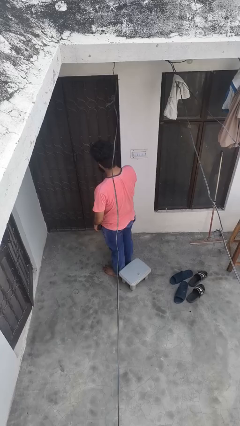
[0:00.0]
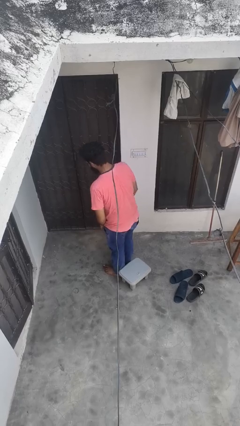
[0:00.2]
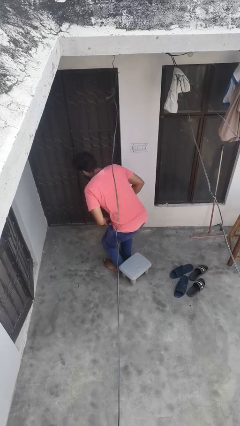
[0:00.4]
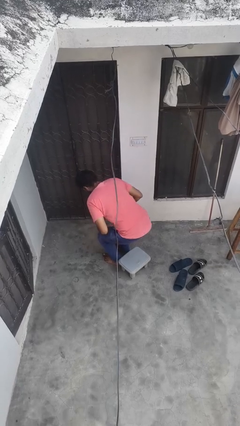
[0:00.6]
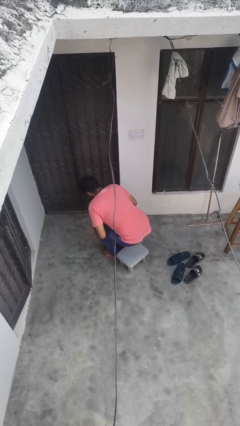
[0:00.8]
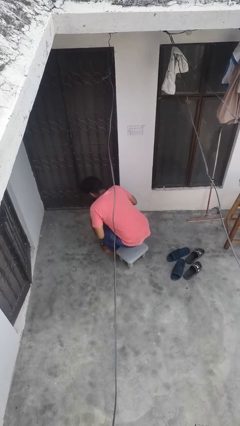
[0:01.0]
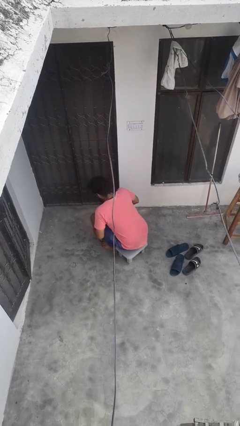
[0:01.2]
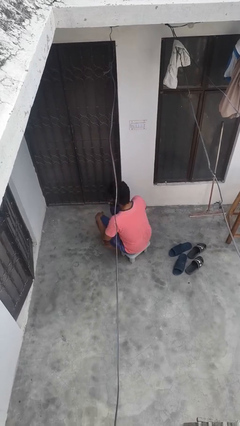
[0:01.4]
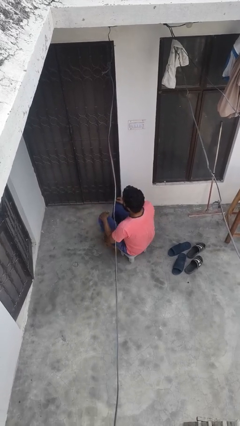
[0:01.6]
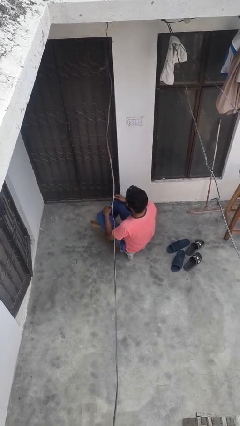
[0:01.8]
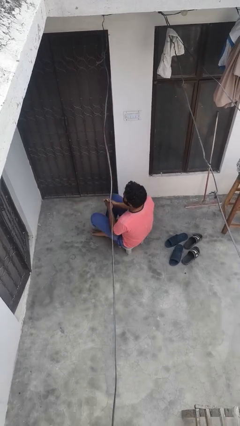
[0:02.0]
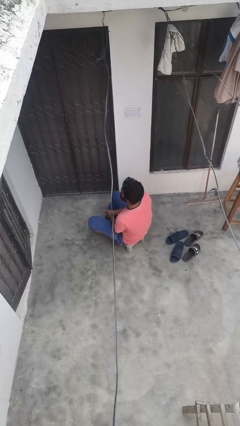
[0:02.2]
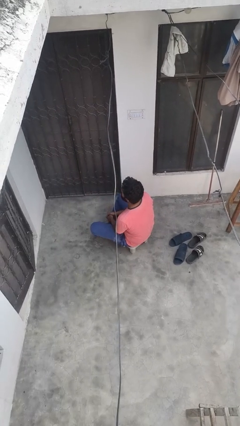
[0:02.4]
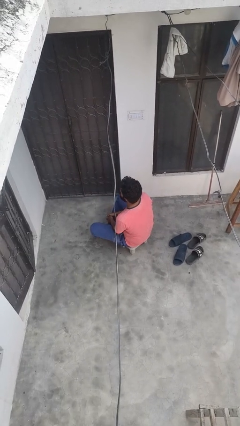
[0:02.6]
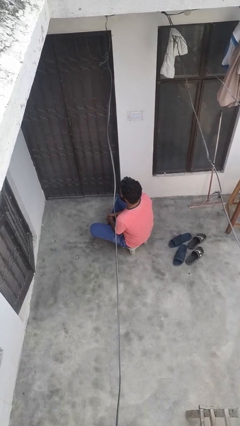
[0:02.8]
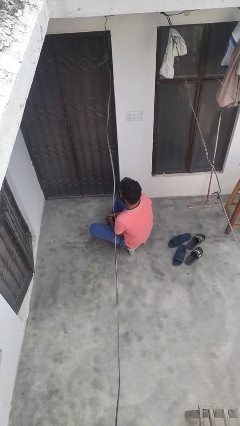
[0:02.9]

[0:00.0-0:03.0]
person sits crisscross

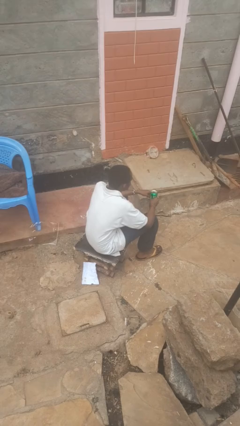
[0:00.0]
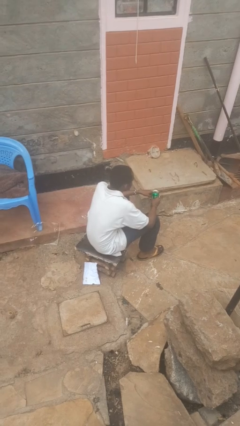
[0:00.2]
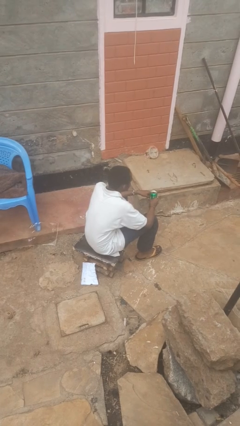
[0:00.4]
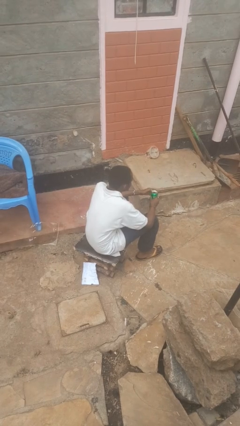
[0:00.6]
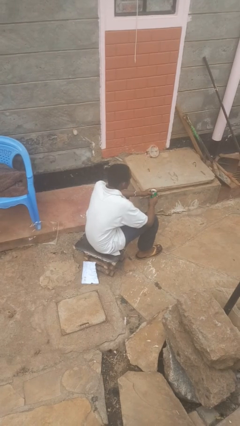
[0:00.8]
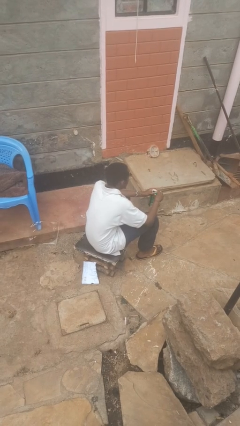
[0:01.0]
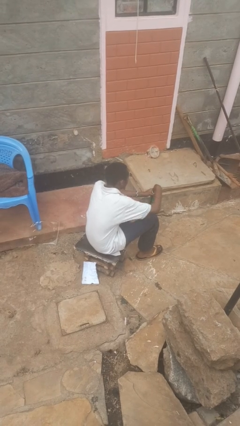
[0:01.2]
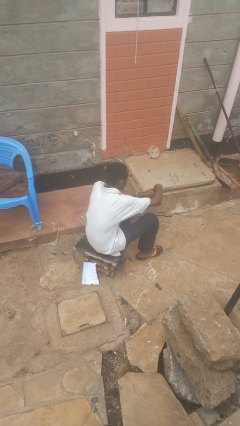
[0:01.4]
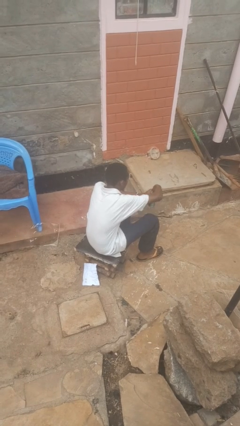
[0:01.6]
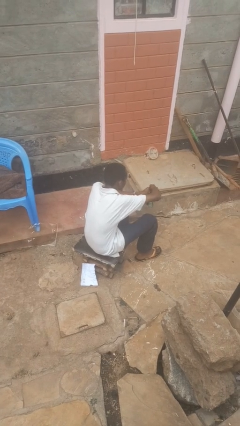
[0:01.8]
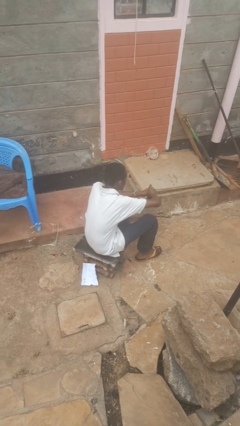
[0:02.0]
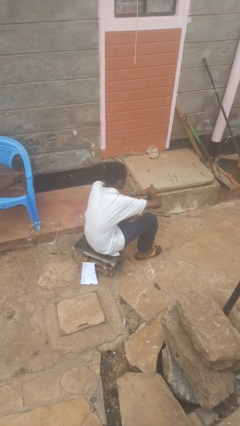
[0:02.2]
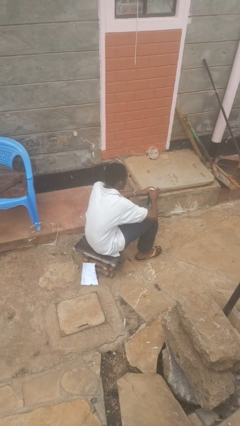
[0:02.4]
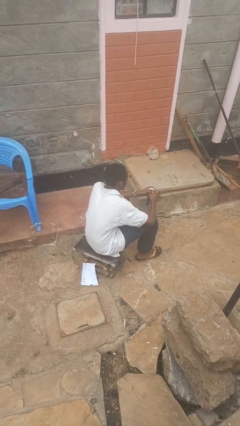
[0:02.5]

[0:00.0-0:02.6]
person opens beverage can

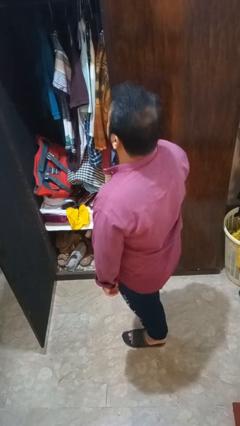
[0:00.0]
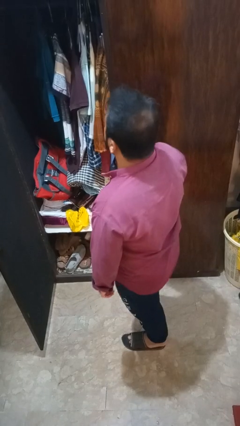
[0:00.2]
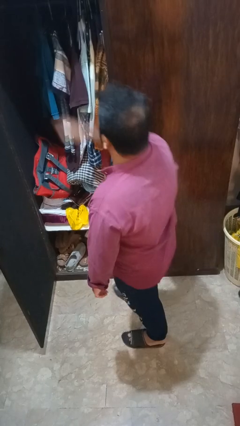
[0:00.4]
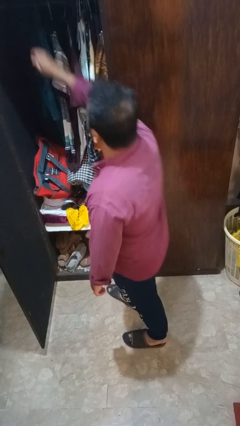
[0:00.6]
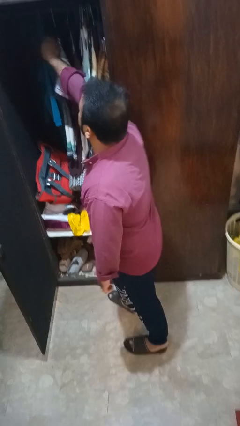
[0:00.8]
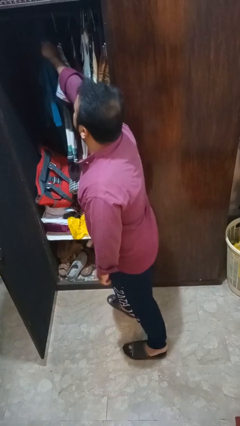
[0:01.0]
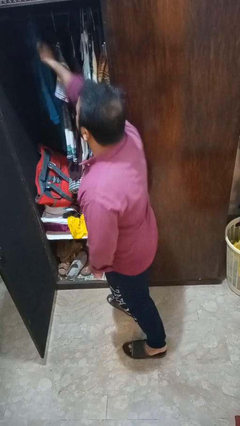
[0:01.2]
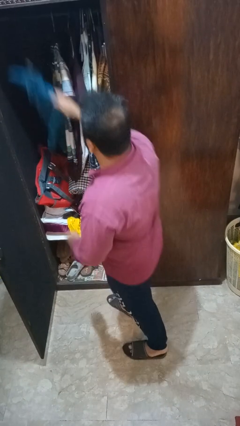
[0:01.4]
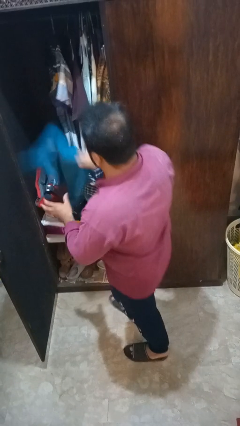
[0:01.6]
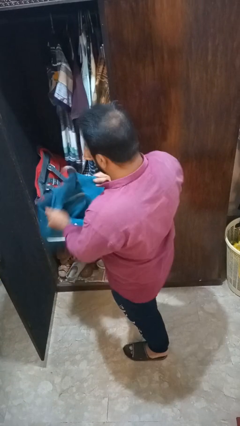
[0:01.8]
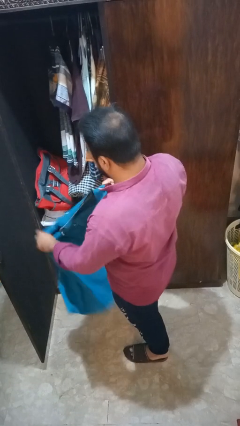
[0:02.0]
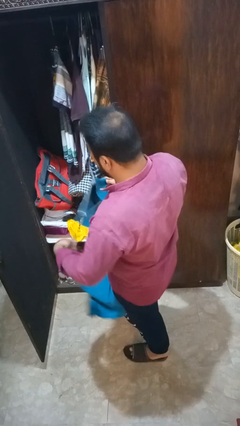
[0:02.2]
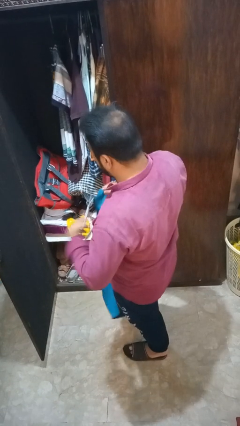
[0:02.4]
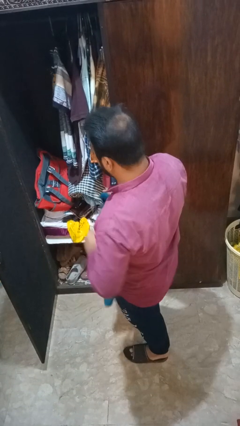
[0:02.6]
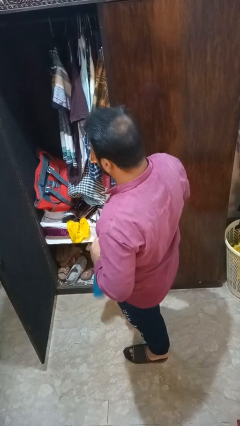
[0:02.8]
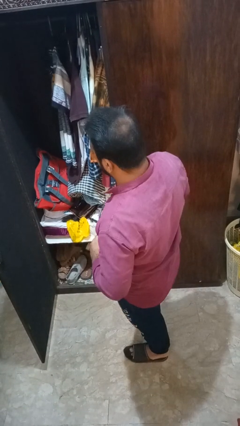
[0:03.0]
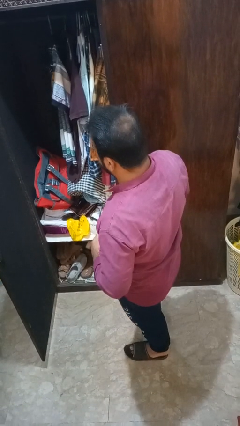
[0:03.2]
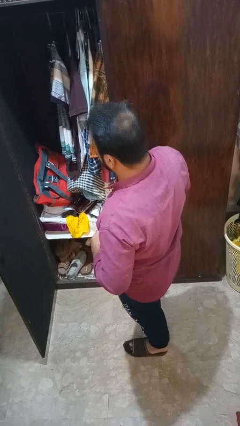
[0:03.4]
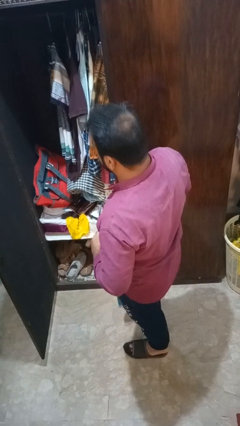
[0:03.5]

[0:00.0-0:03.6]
person takes clothes from closet

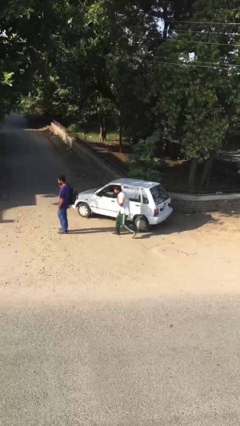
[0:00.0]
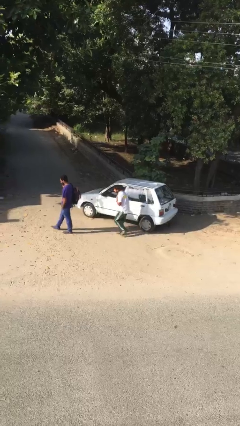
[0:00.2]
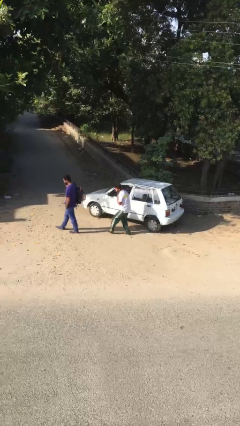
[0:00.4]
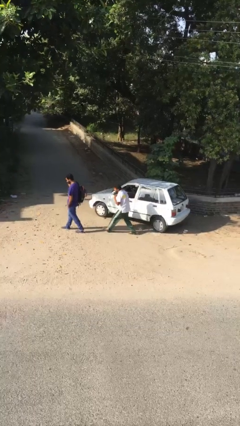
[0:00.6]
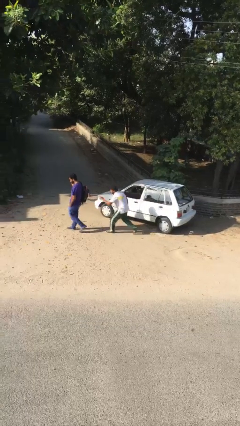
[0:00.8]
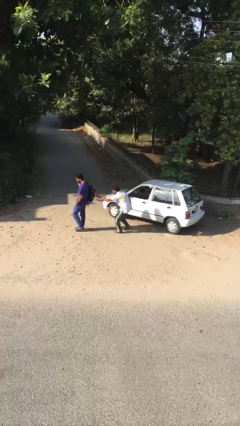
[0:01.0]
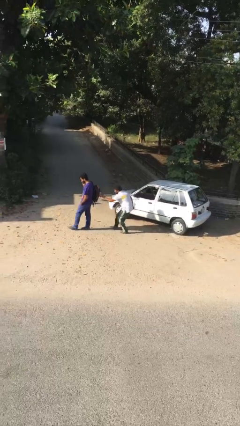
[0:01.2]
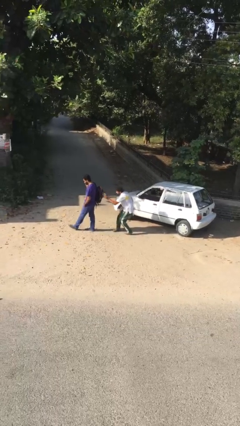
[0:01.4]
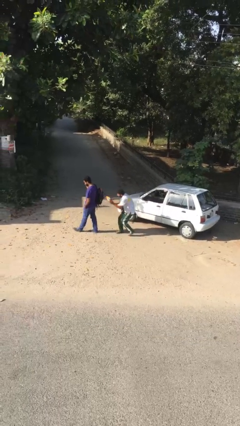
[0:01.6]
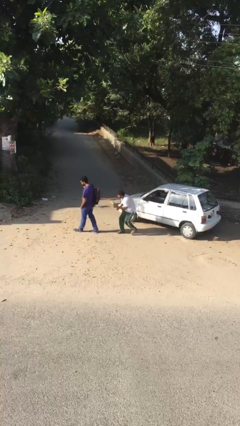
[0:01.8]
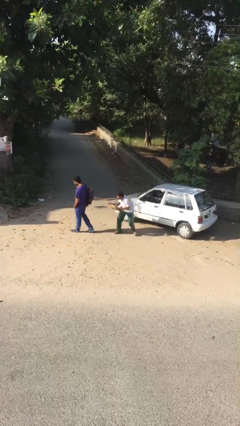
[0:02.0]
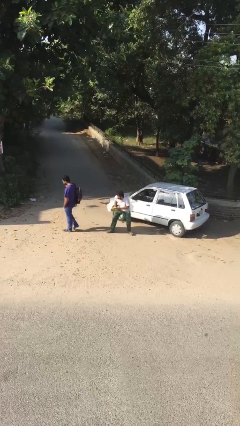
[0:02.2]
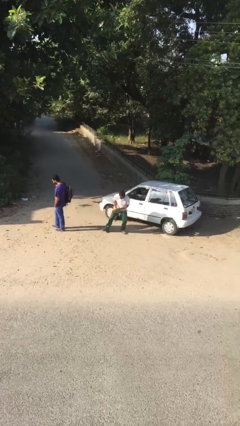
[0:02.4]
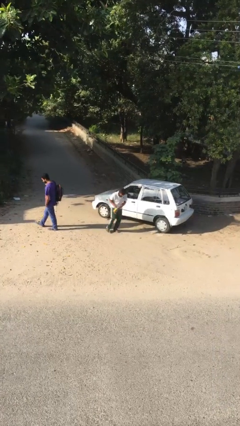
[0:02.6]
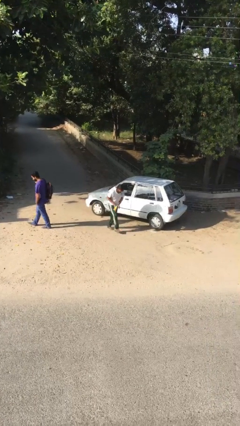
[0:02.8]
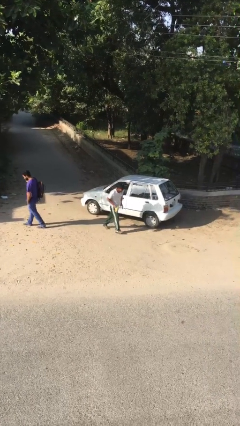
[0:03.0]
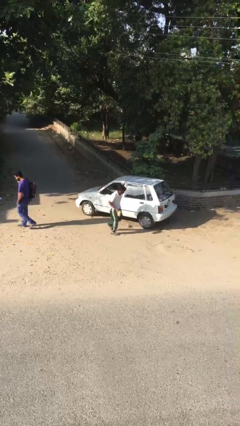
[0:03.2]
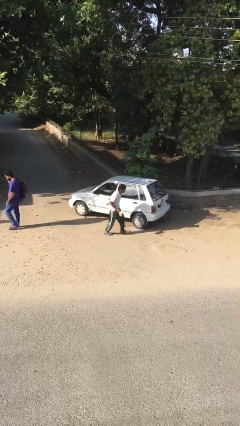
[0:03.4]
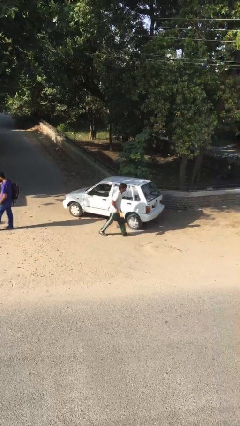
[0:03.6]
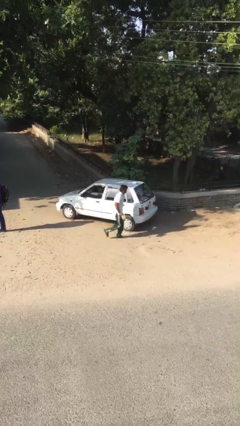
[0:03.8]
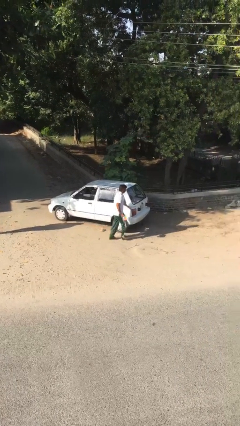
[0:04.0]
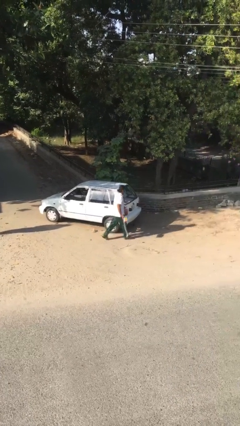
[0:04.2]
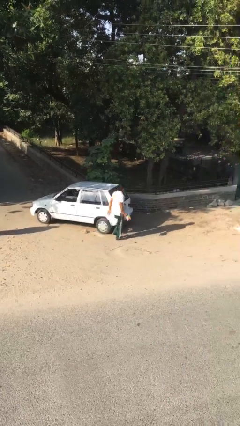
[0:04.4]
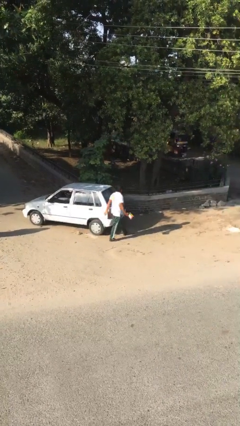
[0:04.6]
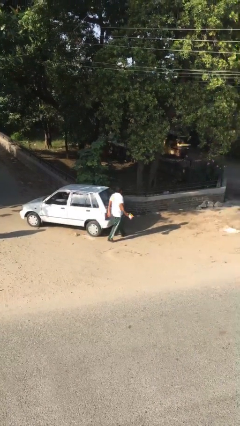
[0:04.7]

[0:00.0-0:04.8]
person steals object from person

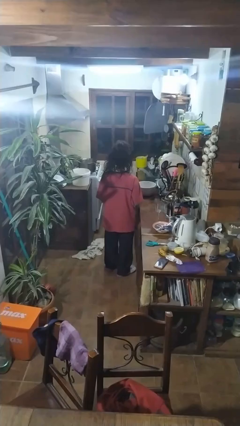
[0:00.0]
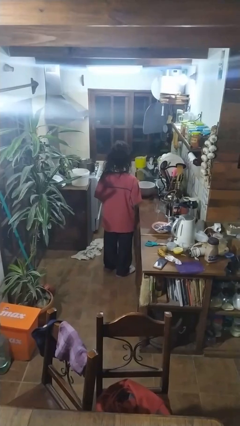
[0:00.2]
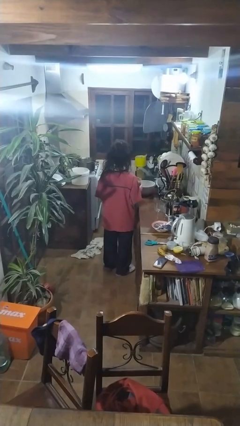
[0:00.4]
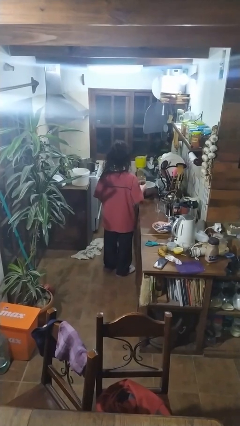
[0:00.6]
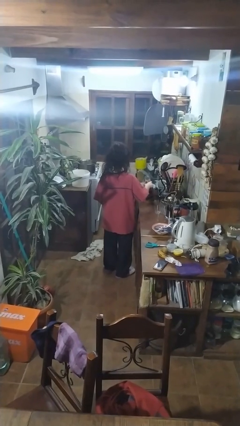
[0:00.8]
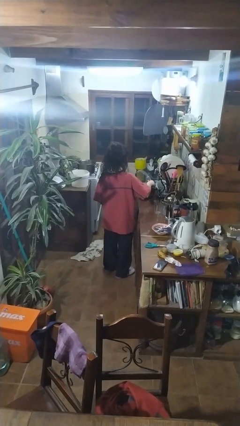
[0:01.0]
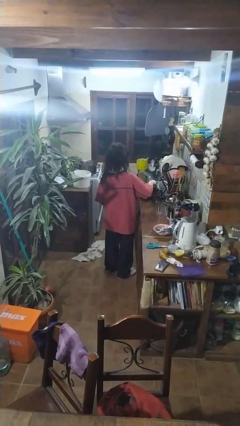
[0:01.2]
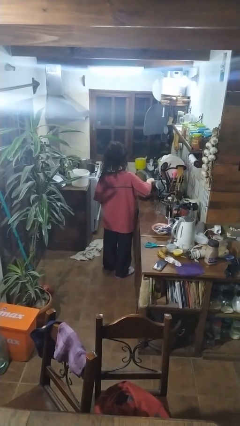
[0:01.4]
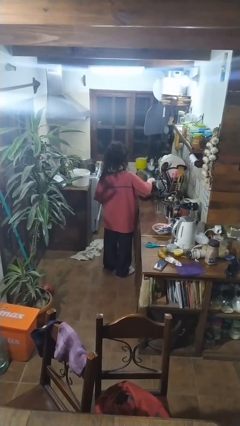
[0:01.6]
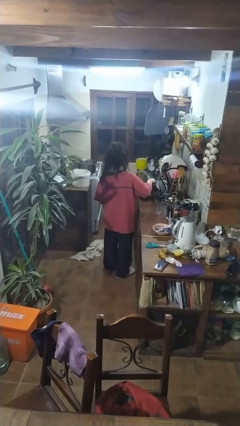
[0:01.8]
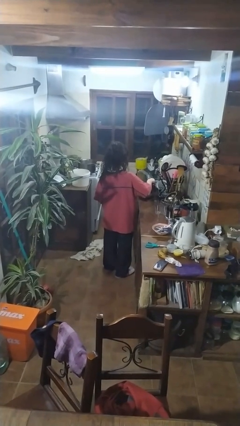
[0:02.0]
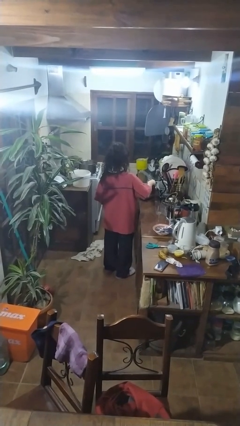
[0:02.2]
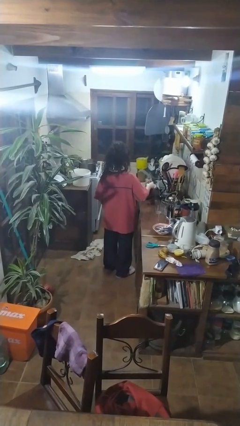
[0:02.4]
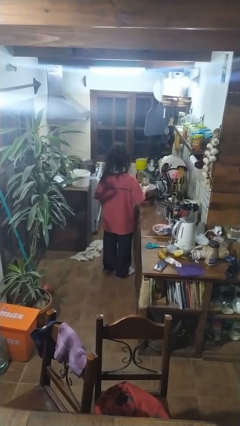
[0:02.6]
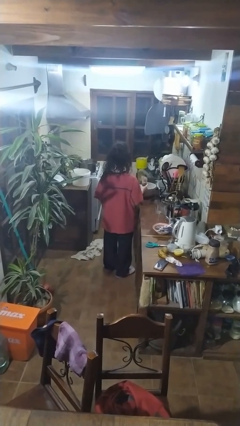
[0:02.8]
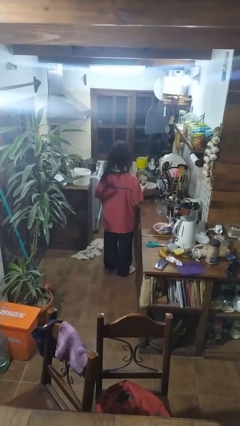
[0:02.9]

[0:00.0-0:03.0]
person pours into bowl

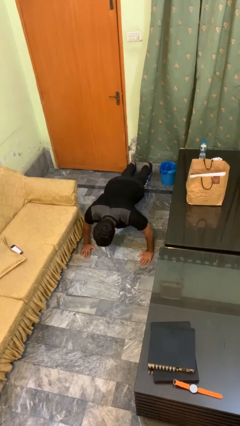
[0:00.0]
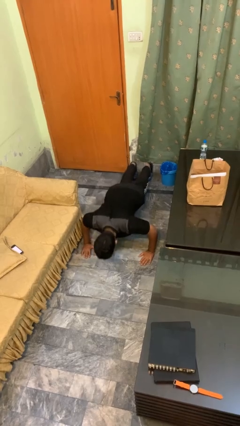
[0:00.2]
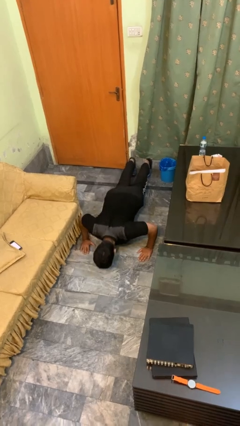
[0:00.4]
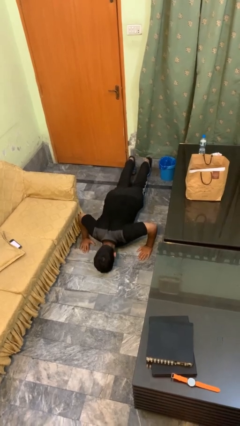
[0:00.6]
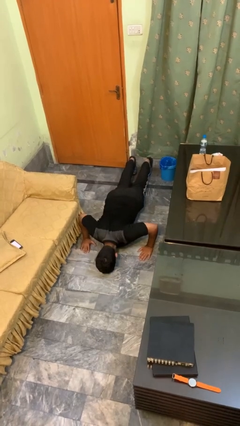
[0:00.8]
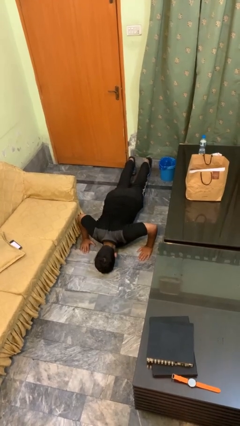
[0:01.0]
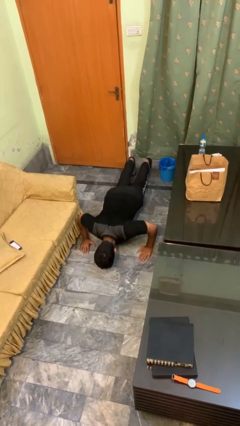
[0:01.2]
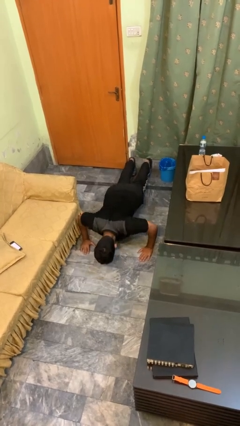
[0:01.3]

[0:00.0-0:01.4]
person exercises with pushup
